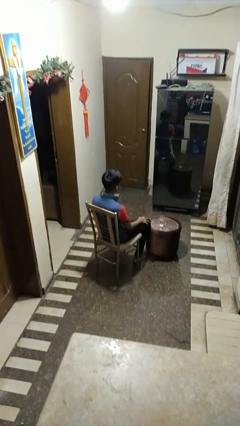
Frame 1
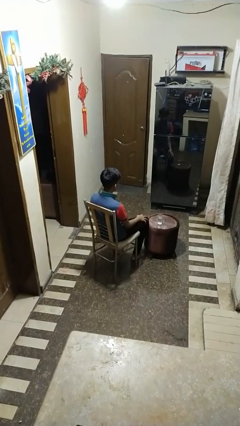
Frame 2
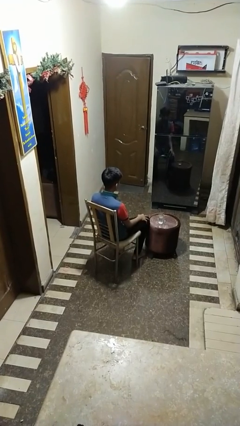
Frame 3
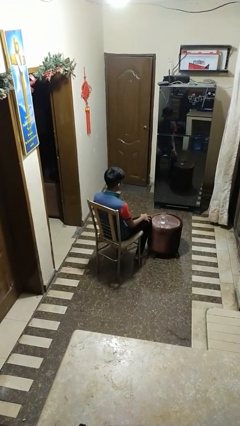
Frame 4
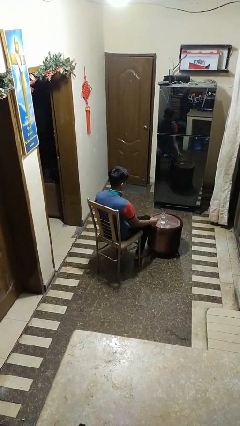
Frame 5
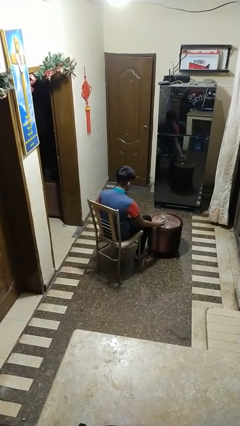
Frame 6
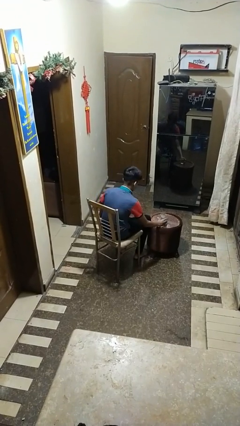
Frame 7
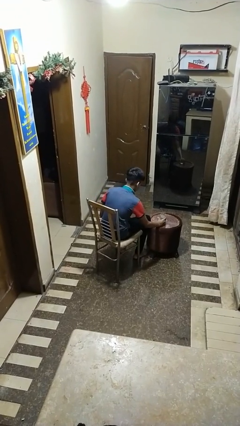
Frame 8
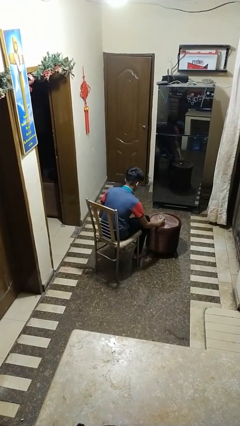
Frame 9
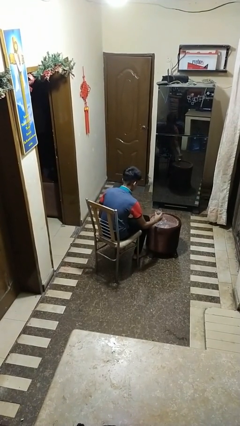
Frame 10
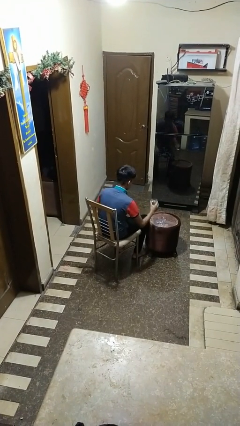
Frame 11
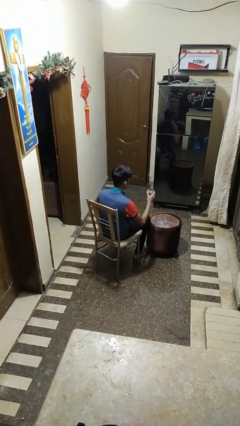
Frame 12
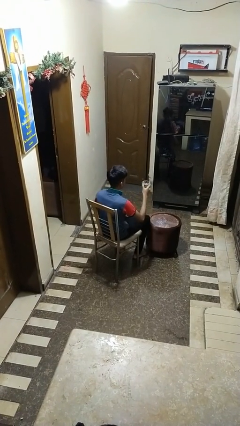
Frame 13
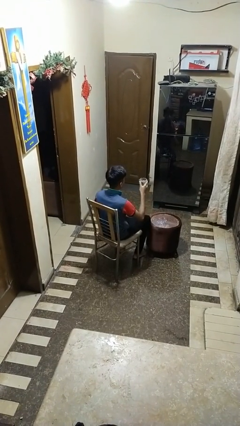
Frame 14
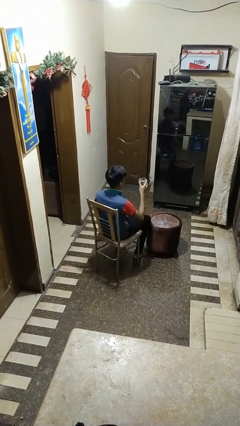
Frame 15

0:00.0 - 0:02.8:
person picks up object from table

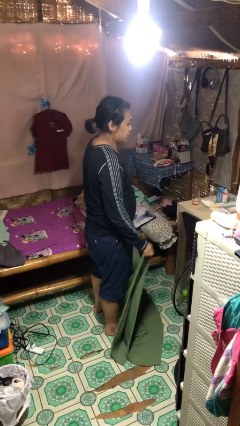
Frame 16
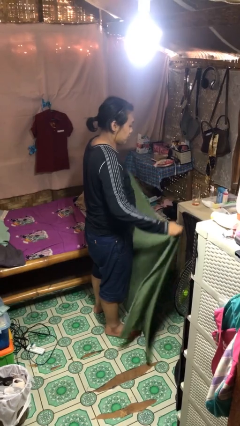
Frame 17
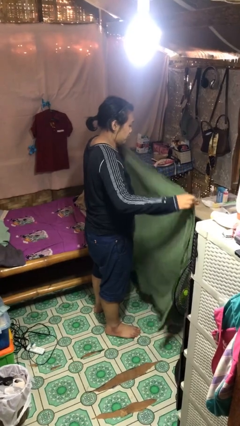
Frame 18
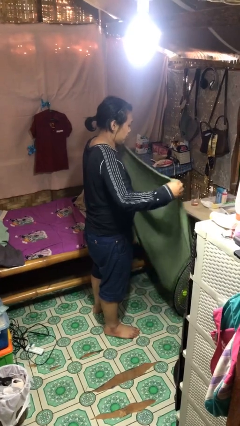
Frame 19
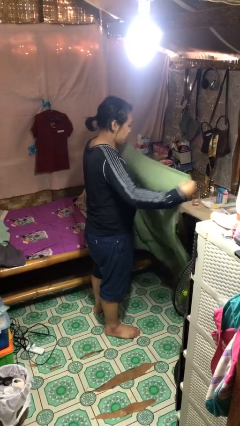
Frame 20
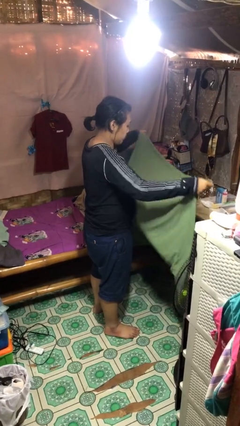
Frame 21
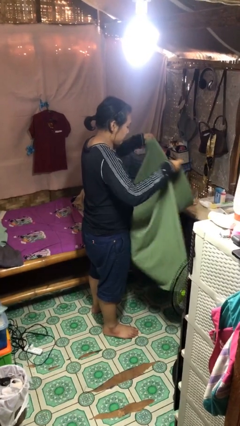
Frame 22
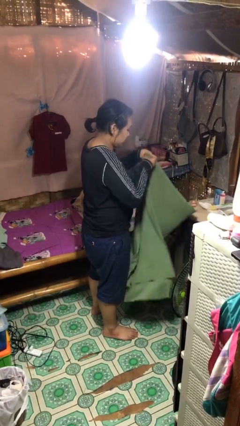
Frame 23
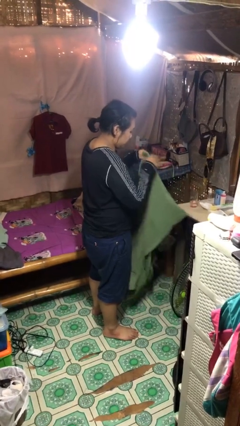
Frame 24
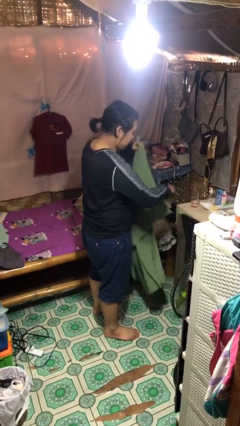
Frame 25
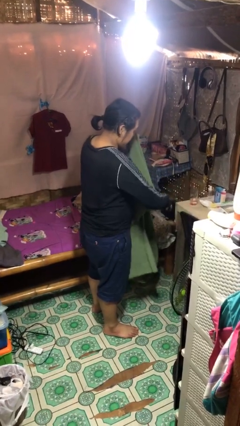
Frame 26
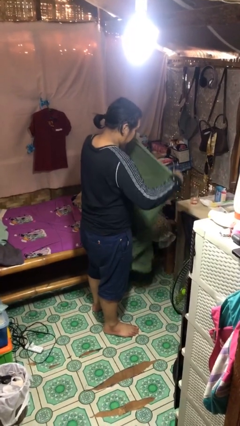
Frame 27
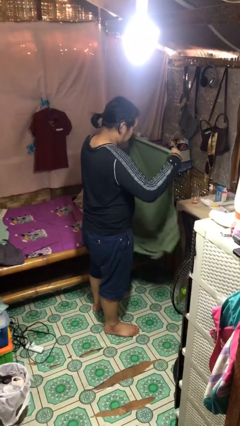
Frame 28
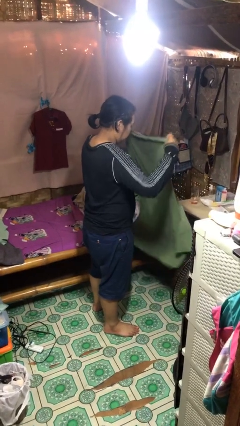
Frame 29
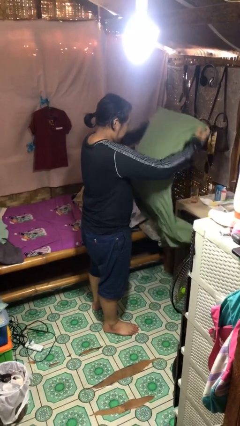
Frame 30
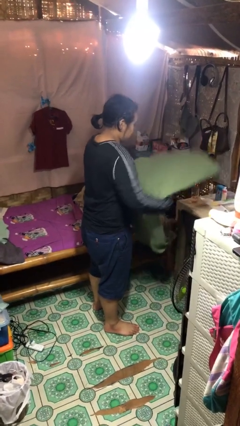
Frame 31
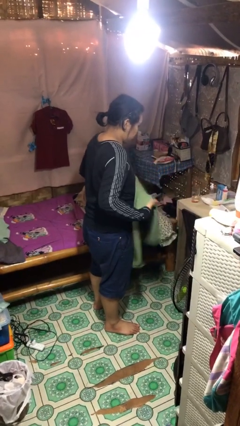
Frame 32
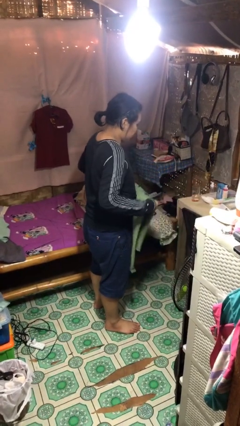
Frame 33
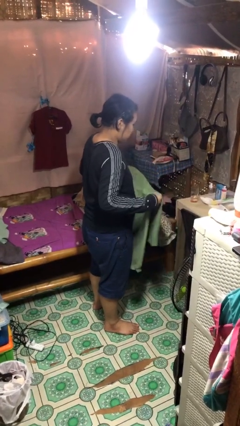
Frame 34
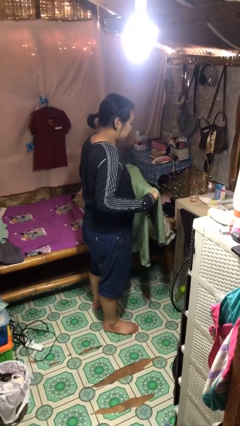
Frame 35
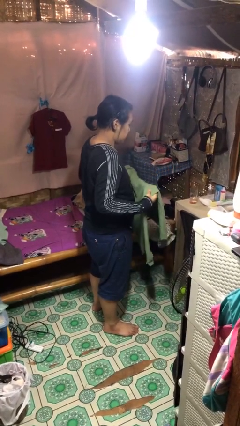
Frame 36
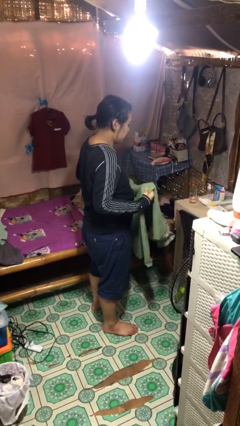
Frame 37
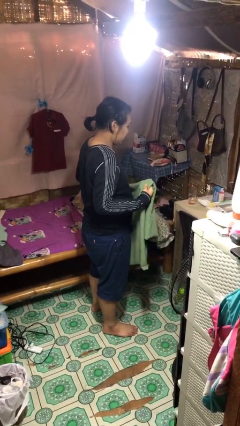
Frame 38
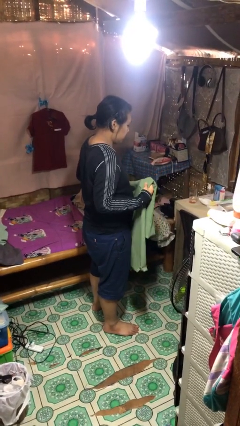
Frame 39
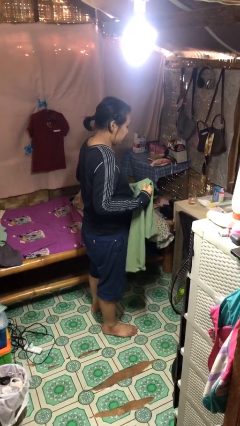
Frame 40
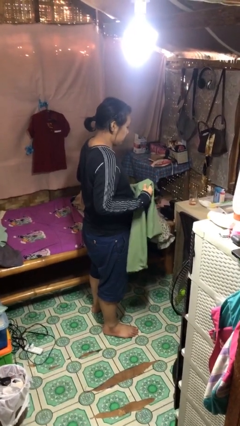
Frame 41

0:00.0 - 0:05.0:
person folds blanket

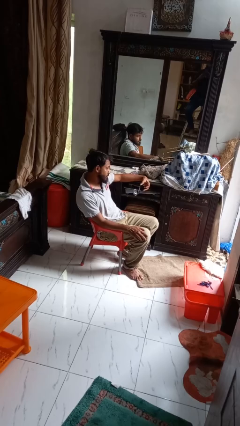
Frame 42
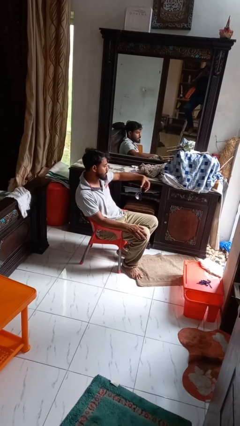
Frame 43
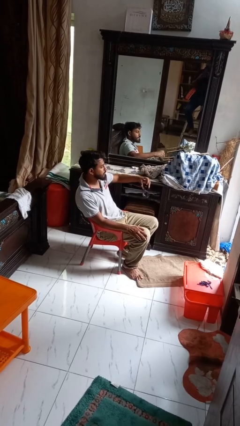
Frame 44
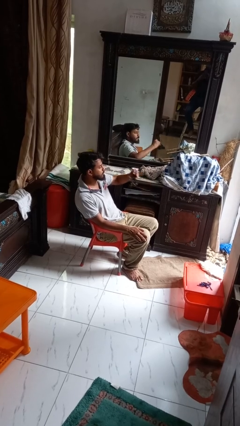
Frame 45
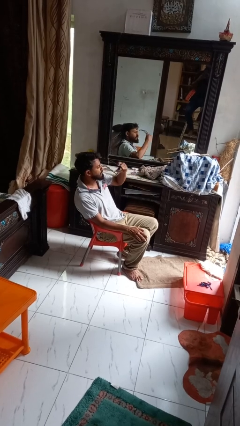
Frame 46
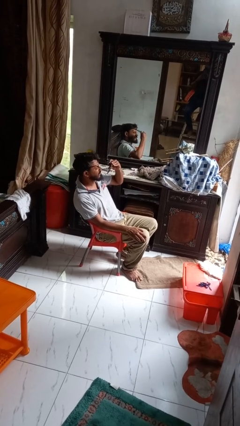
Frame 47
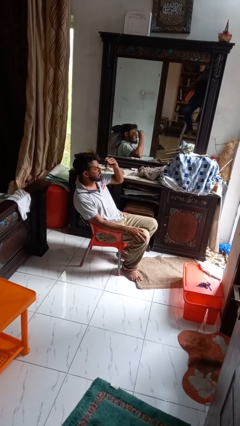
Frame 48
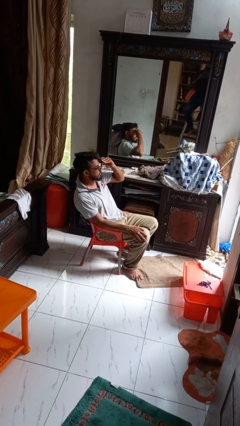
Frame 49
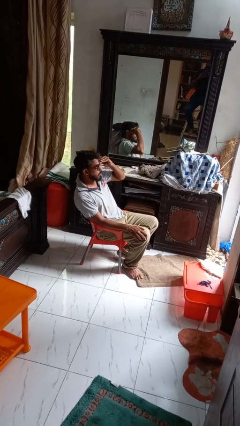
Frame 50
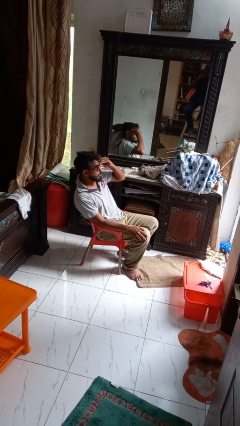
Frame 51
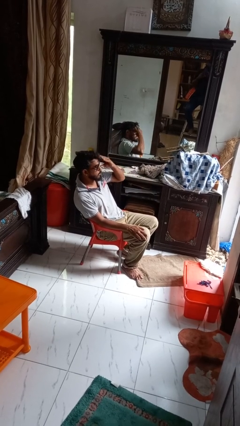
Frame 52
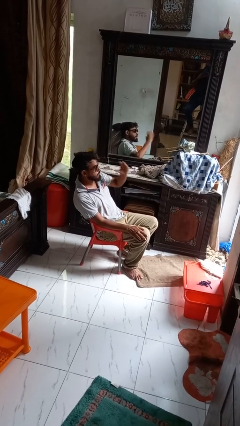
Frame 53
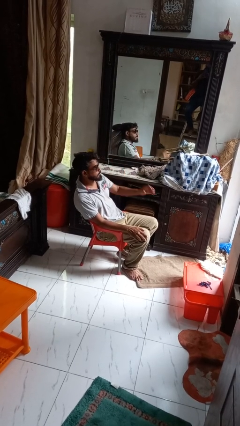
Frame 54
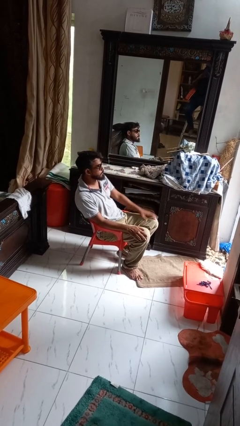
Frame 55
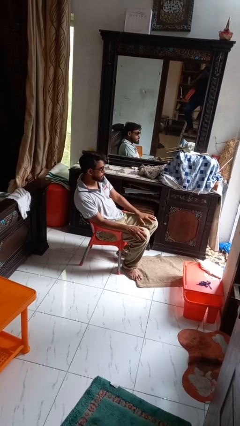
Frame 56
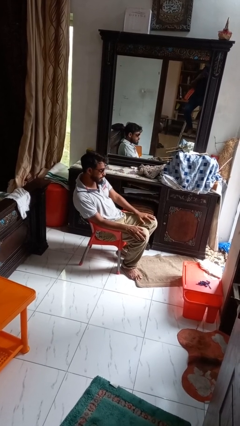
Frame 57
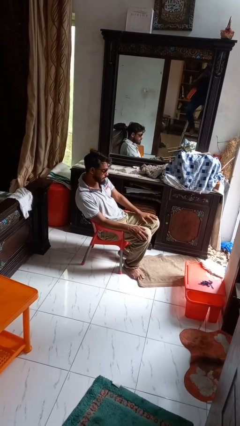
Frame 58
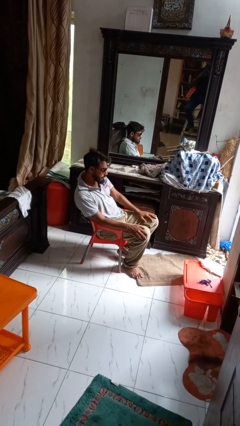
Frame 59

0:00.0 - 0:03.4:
person puts on sunglasses

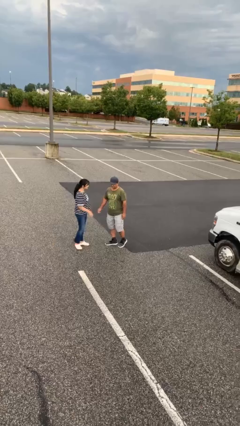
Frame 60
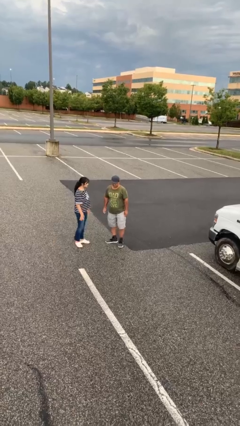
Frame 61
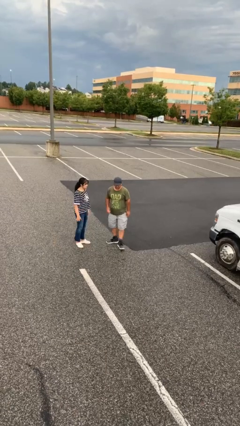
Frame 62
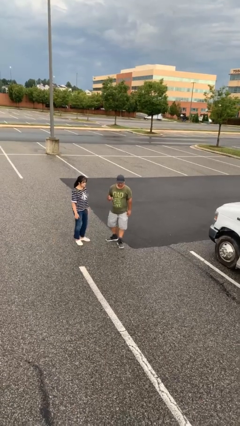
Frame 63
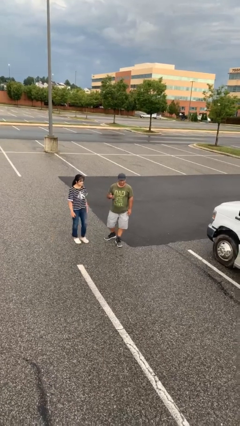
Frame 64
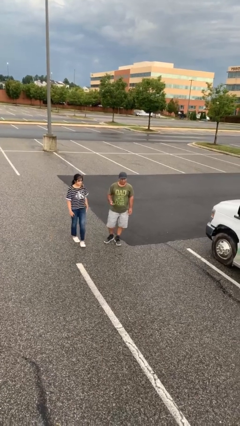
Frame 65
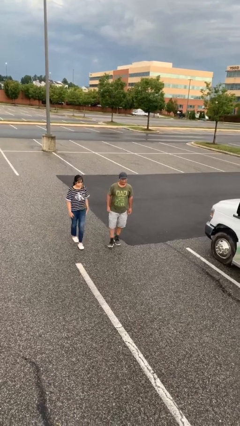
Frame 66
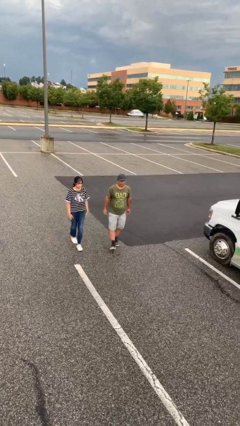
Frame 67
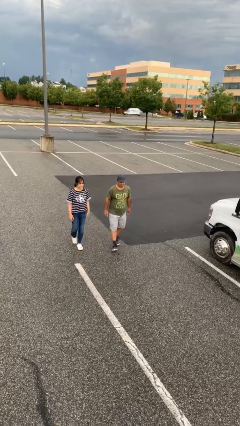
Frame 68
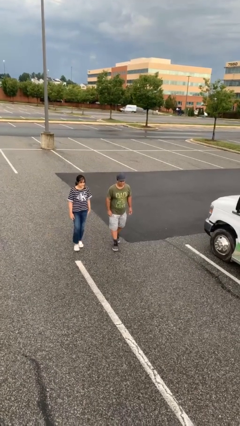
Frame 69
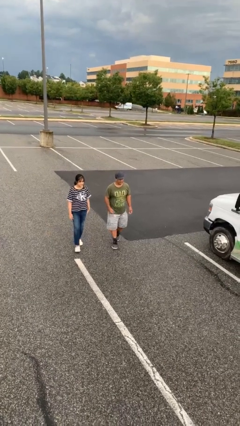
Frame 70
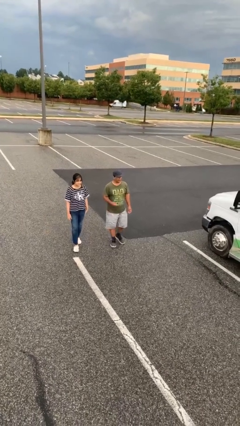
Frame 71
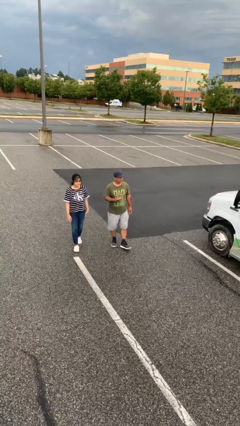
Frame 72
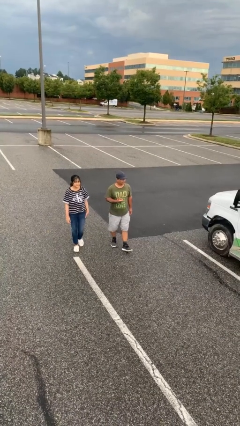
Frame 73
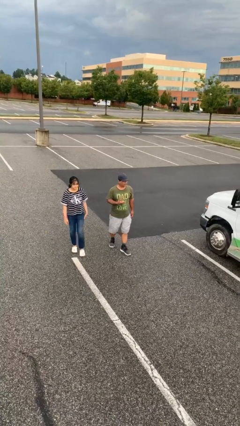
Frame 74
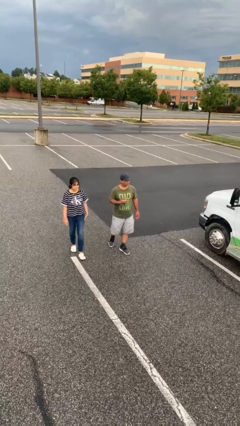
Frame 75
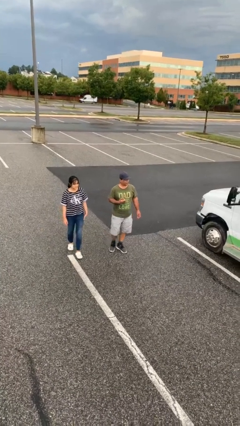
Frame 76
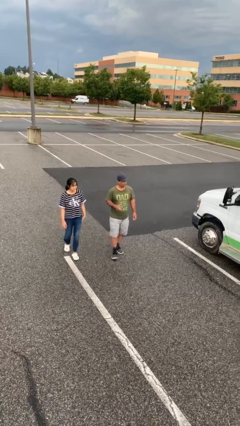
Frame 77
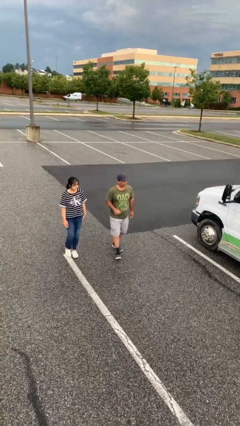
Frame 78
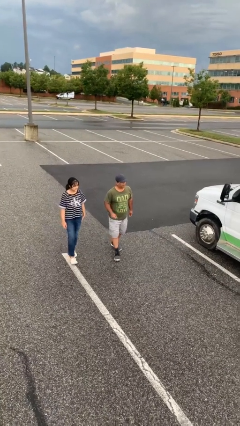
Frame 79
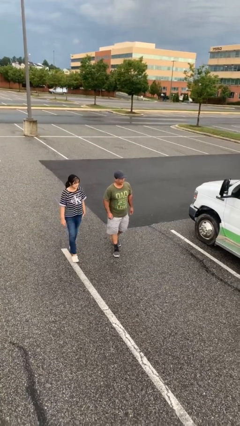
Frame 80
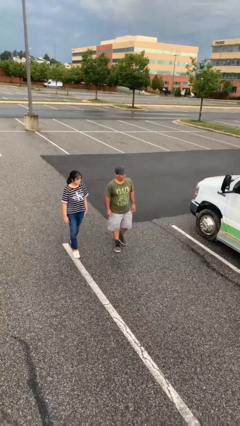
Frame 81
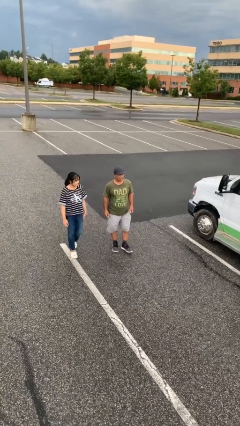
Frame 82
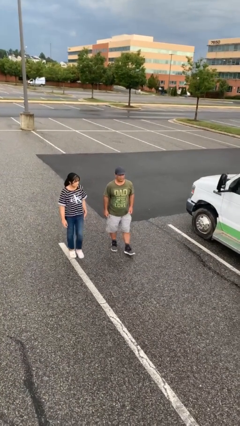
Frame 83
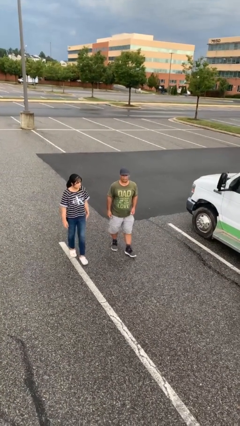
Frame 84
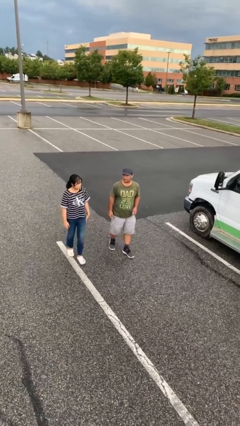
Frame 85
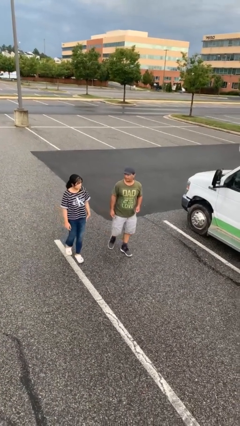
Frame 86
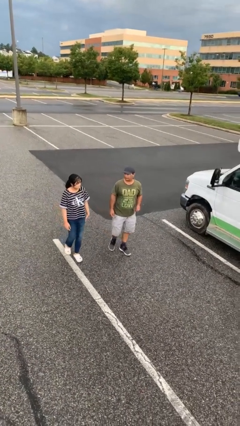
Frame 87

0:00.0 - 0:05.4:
person talks to person

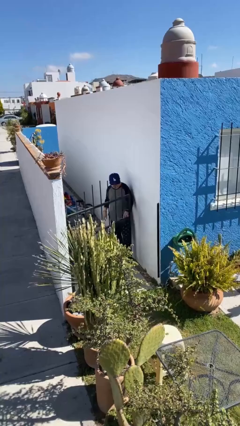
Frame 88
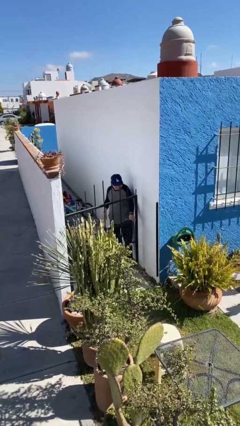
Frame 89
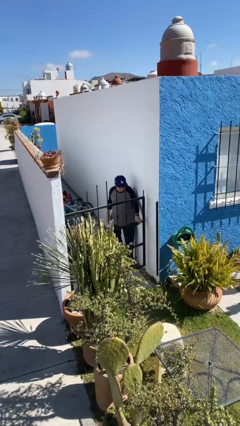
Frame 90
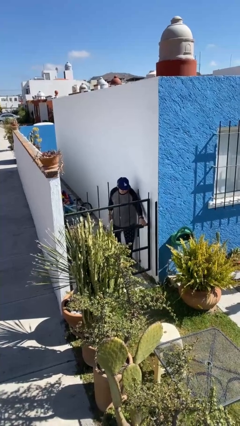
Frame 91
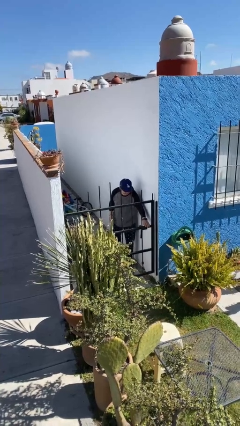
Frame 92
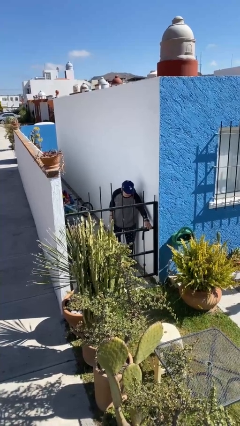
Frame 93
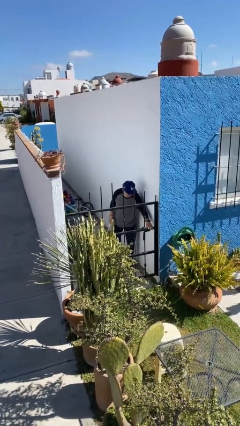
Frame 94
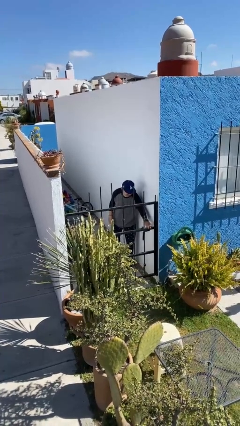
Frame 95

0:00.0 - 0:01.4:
person closes facility door
